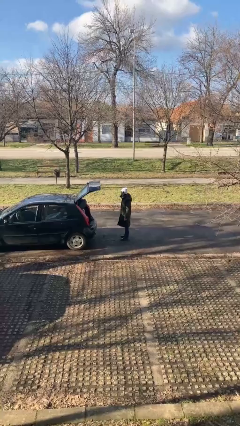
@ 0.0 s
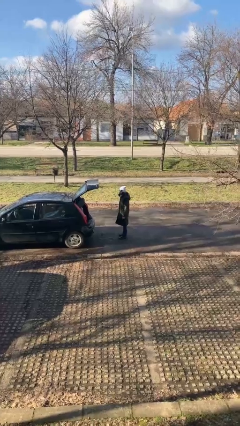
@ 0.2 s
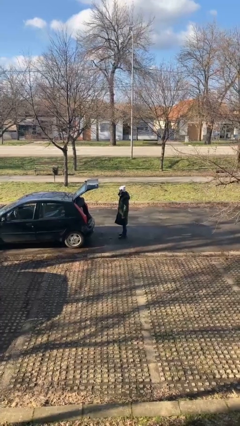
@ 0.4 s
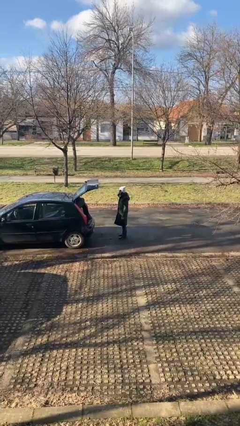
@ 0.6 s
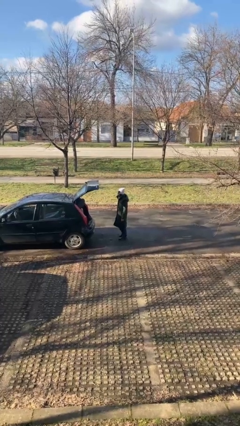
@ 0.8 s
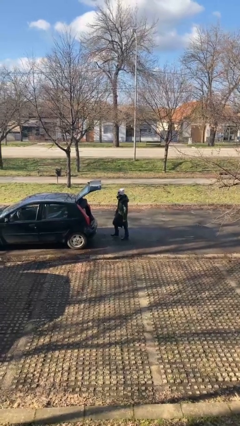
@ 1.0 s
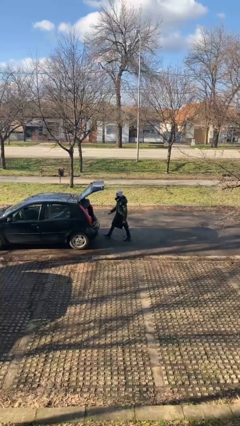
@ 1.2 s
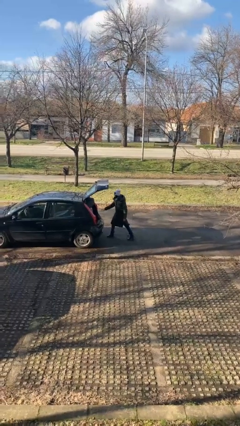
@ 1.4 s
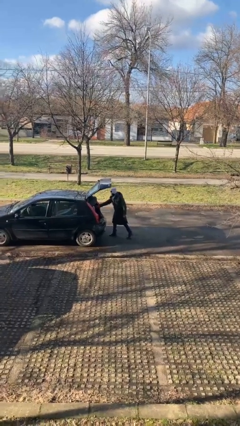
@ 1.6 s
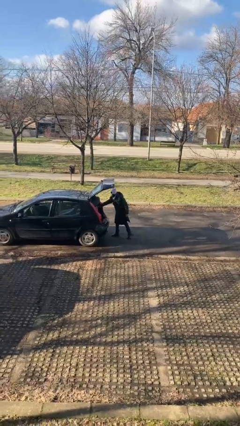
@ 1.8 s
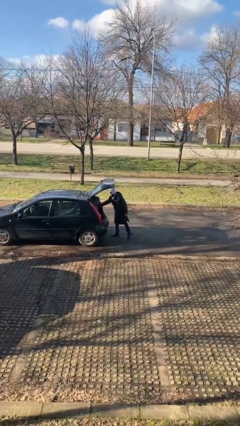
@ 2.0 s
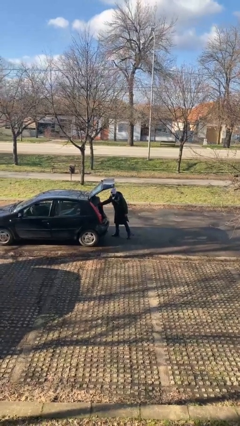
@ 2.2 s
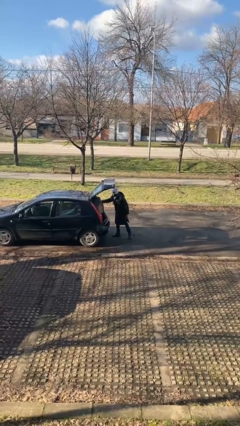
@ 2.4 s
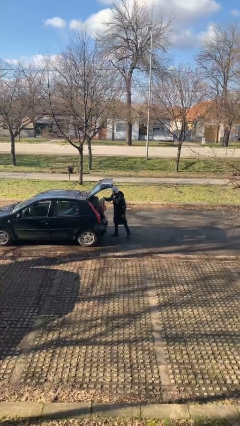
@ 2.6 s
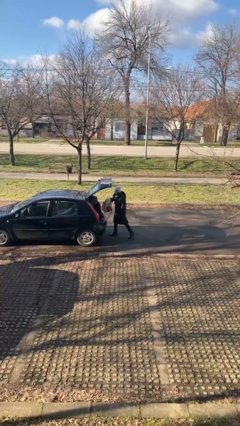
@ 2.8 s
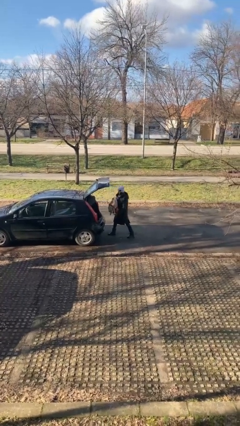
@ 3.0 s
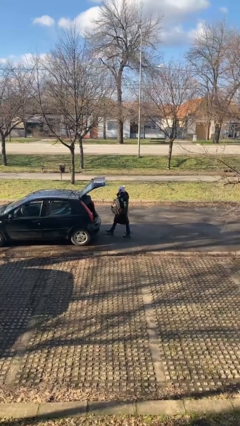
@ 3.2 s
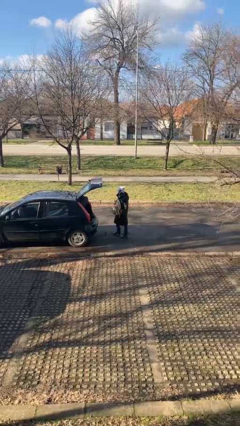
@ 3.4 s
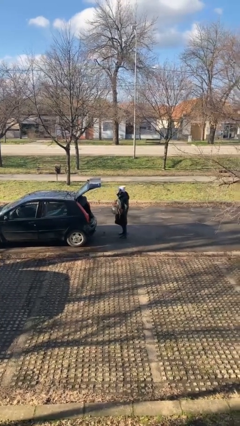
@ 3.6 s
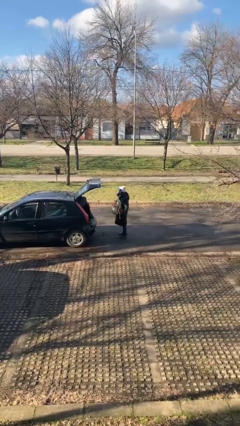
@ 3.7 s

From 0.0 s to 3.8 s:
person unloads car

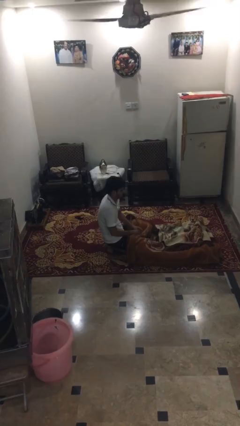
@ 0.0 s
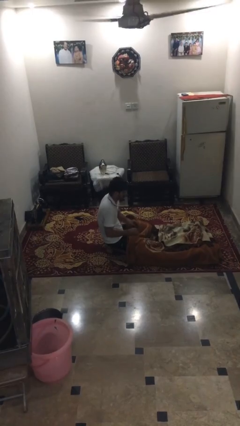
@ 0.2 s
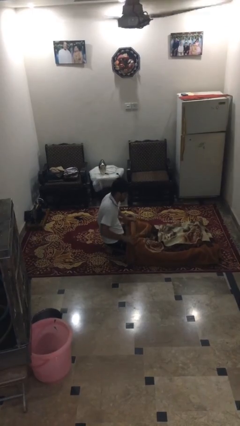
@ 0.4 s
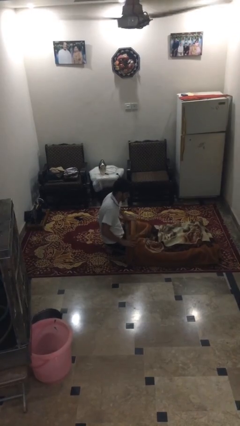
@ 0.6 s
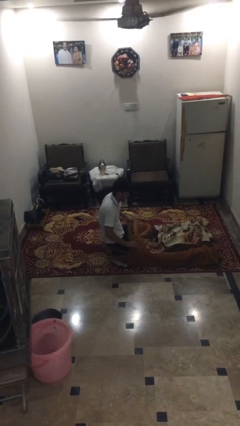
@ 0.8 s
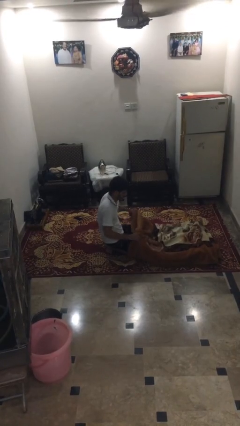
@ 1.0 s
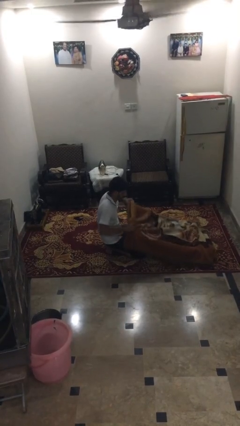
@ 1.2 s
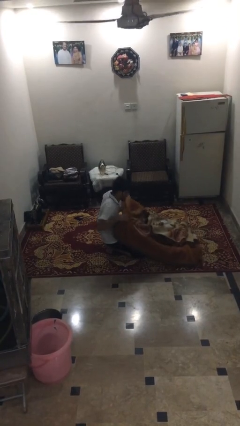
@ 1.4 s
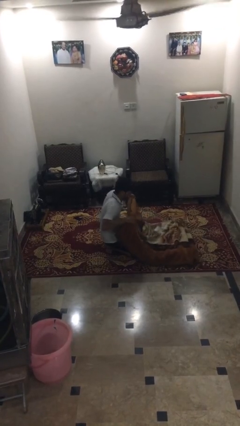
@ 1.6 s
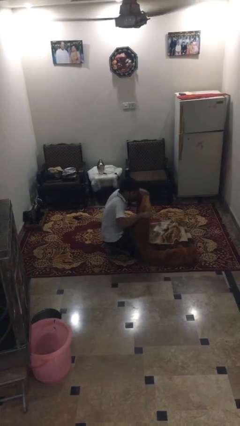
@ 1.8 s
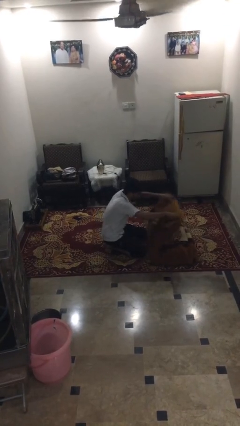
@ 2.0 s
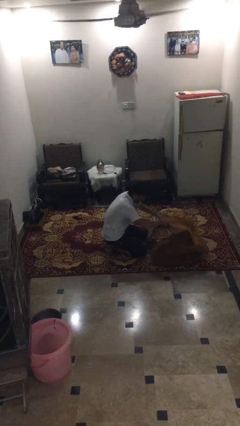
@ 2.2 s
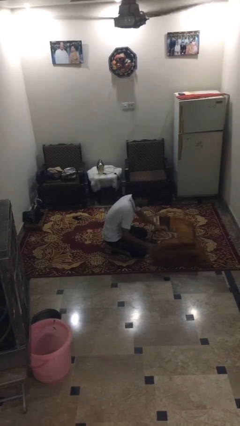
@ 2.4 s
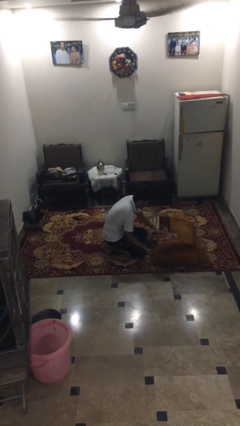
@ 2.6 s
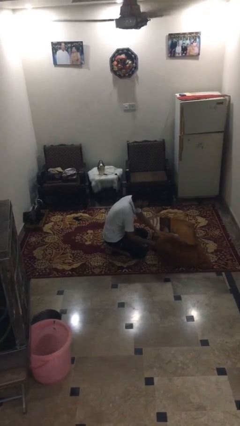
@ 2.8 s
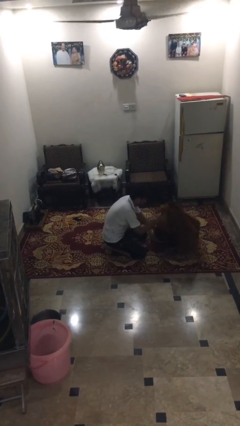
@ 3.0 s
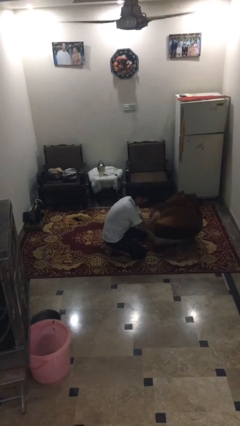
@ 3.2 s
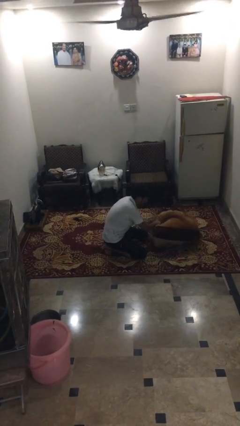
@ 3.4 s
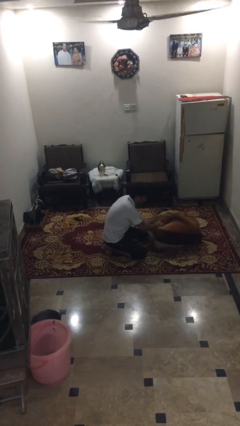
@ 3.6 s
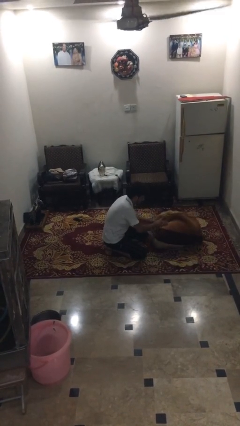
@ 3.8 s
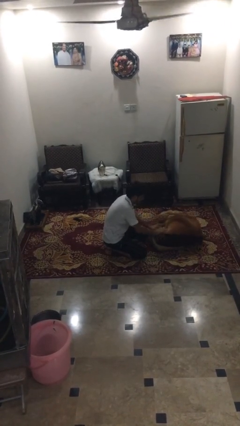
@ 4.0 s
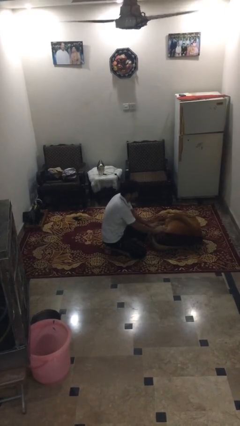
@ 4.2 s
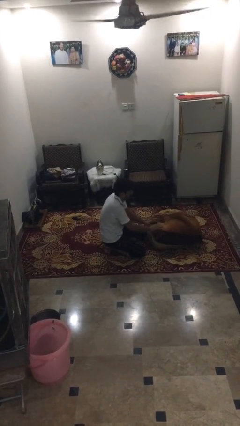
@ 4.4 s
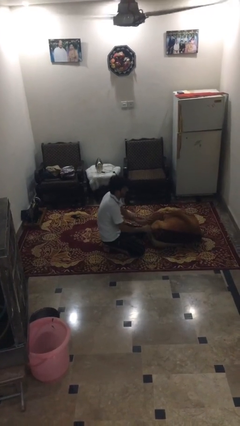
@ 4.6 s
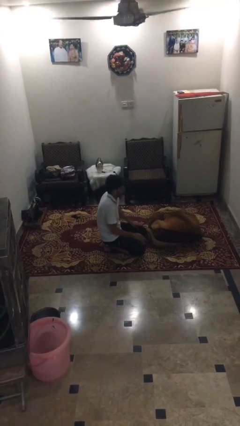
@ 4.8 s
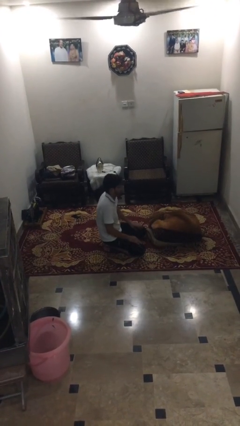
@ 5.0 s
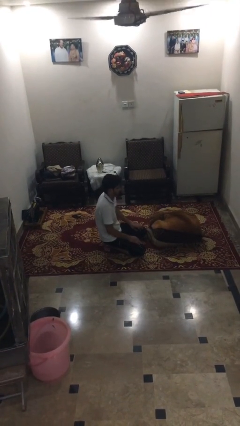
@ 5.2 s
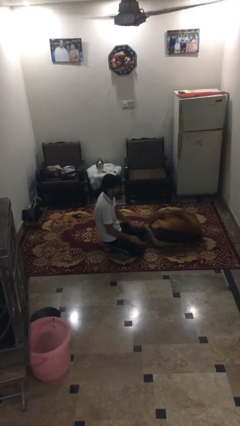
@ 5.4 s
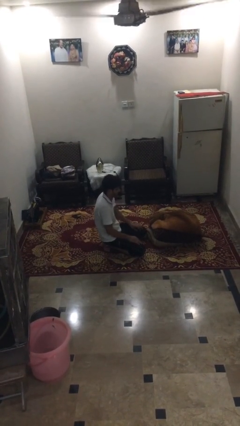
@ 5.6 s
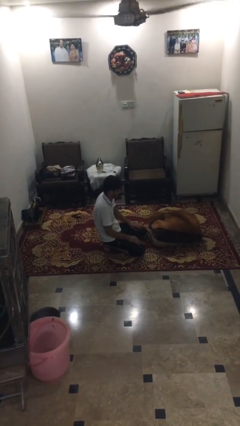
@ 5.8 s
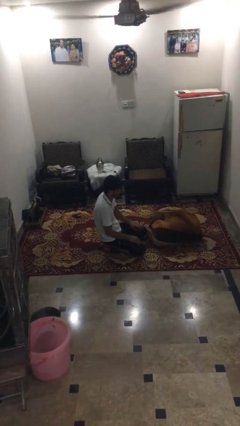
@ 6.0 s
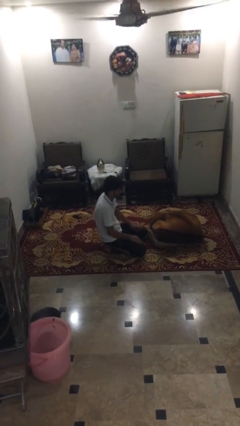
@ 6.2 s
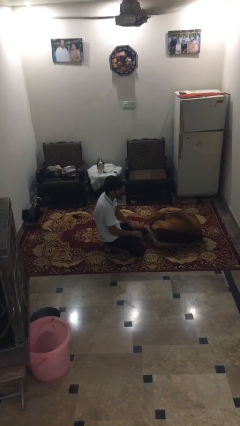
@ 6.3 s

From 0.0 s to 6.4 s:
person folds blanket

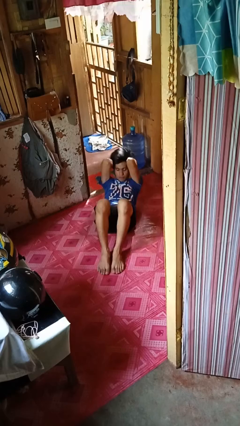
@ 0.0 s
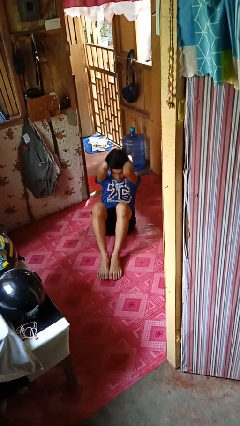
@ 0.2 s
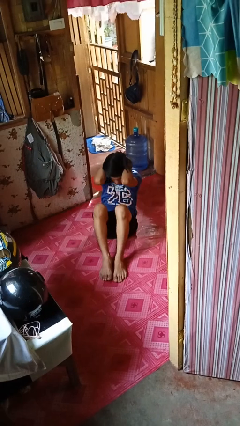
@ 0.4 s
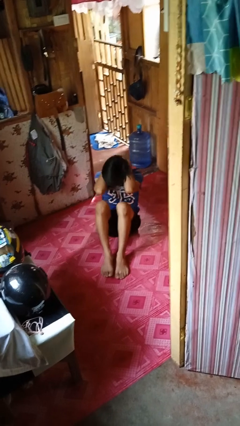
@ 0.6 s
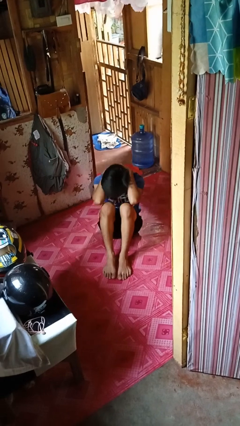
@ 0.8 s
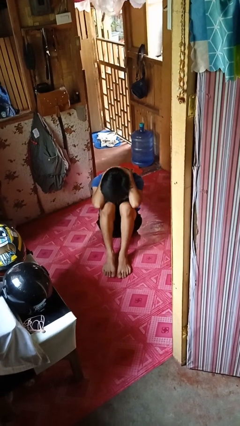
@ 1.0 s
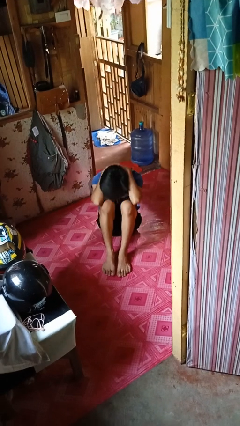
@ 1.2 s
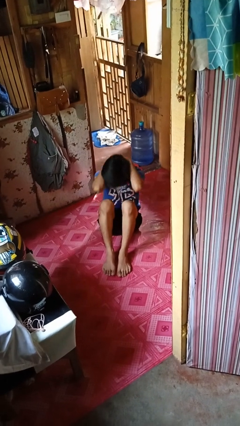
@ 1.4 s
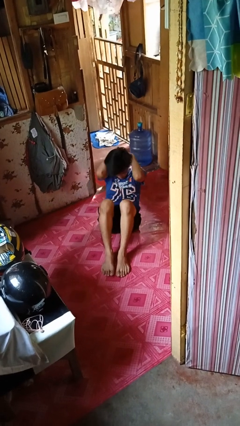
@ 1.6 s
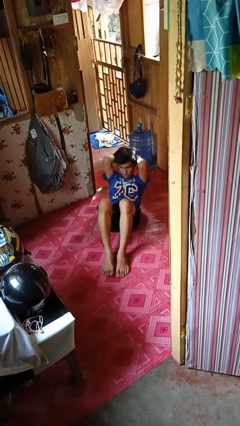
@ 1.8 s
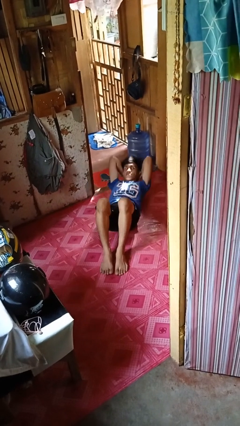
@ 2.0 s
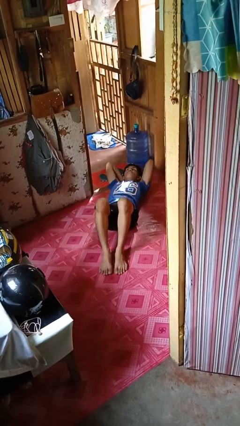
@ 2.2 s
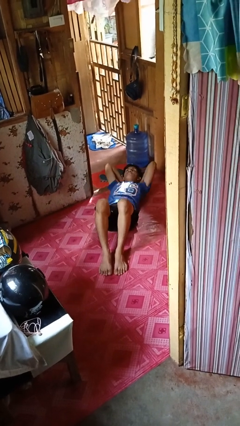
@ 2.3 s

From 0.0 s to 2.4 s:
person exercises with situp

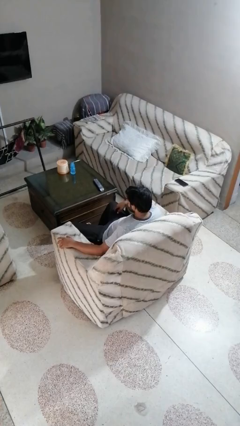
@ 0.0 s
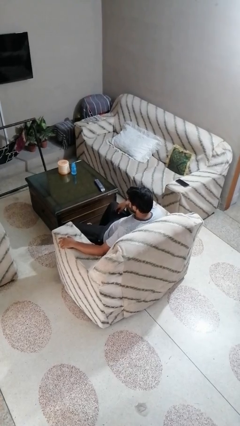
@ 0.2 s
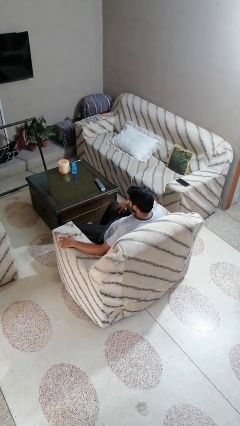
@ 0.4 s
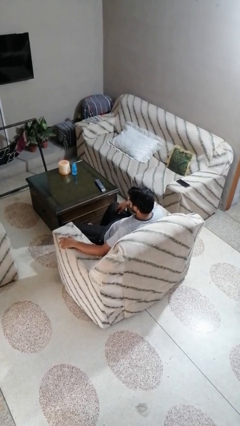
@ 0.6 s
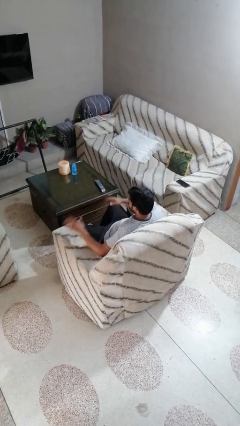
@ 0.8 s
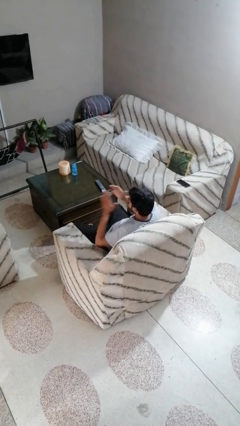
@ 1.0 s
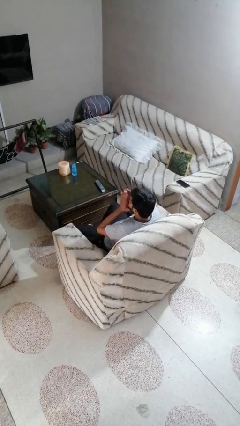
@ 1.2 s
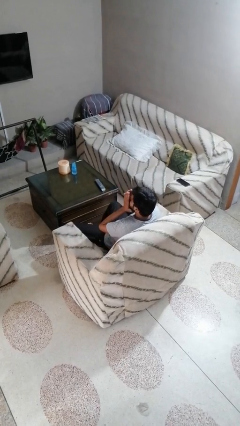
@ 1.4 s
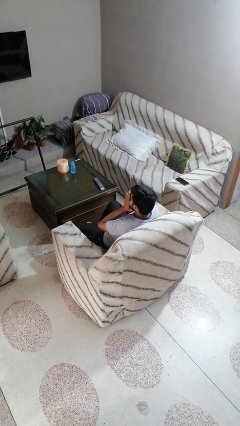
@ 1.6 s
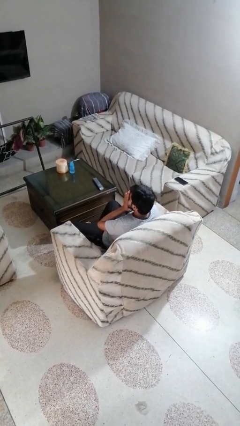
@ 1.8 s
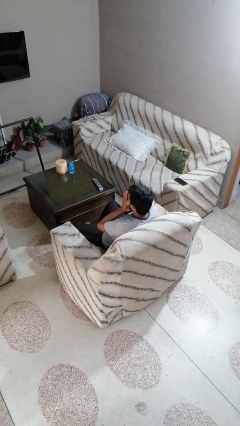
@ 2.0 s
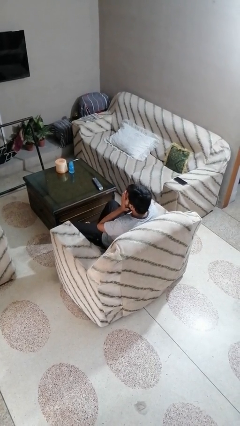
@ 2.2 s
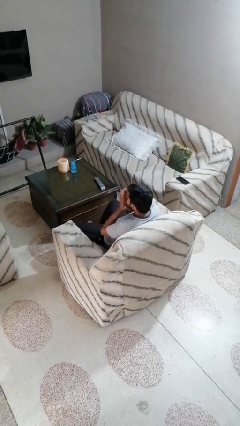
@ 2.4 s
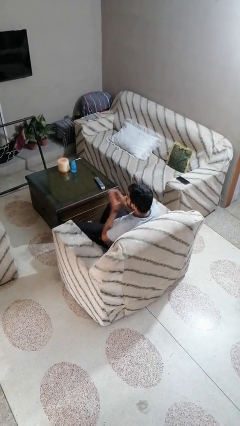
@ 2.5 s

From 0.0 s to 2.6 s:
person covers face with hands

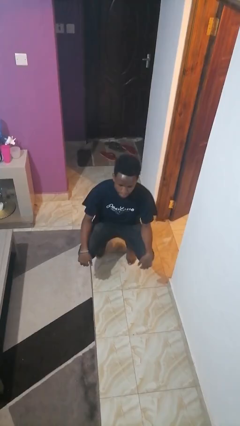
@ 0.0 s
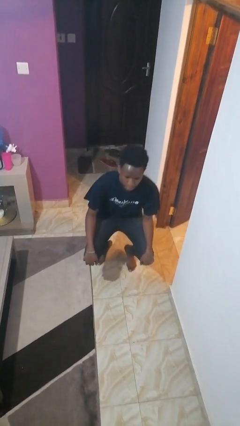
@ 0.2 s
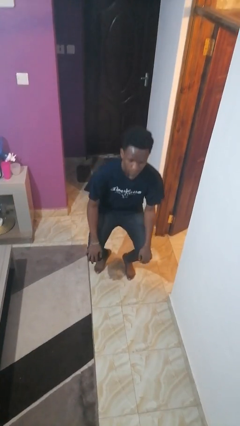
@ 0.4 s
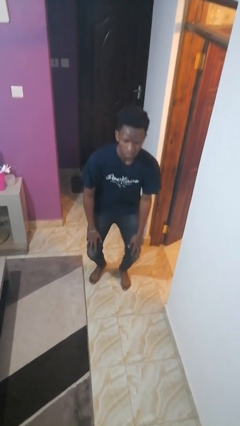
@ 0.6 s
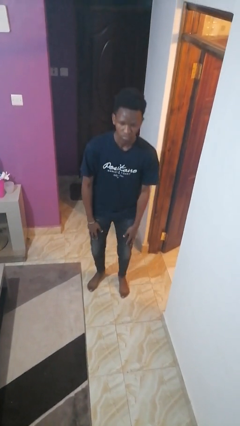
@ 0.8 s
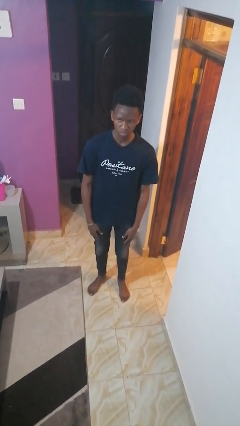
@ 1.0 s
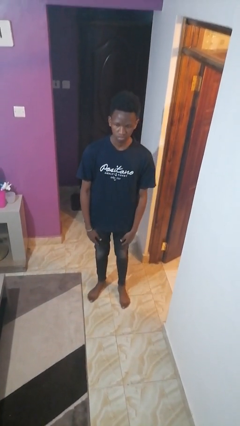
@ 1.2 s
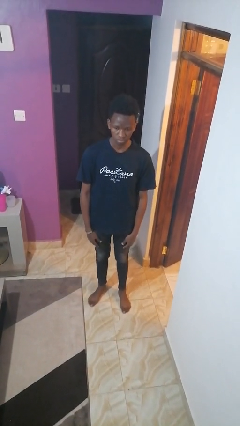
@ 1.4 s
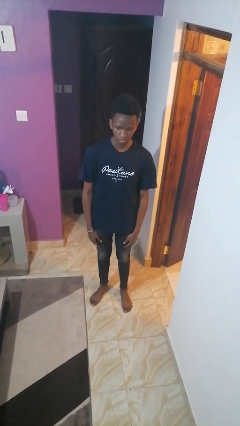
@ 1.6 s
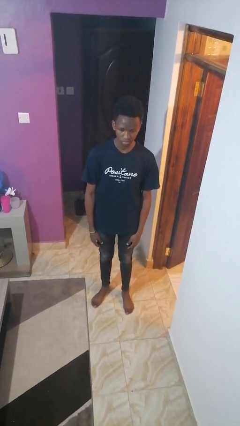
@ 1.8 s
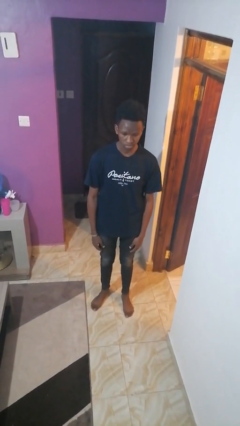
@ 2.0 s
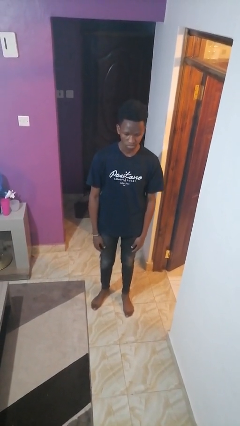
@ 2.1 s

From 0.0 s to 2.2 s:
person stands up

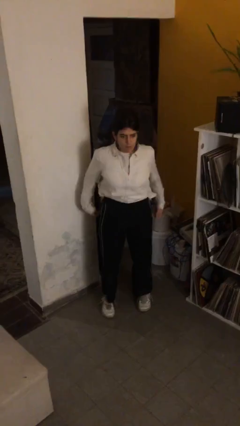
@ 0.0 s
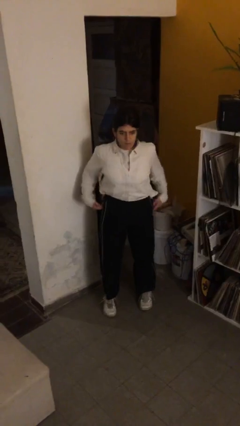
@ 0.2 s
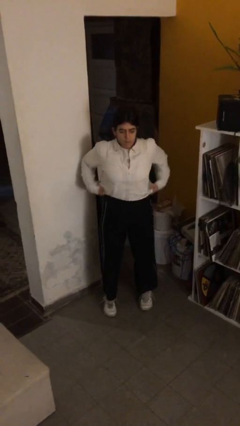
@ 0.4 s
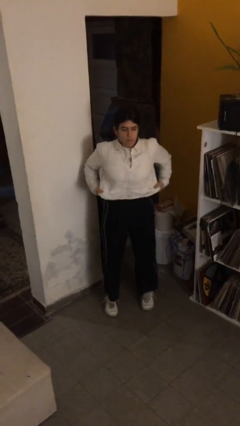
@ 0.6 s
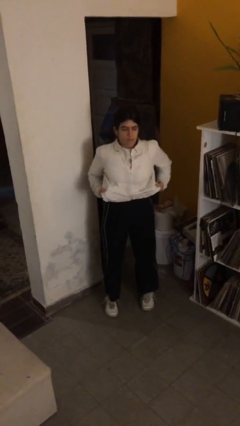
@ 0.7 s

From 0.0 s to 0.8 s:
person untucks shirt
